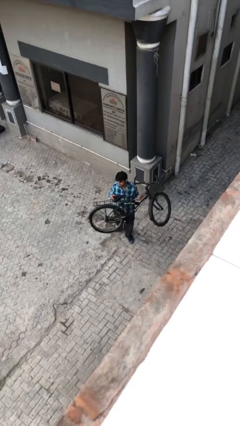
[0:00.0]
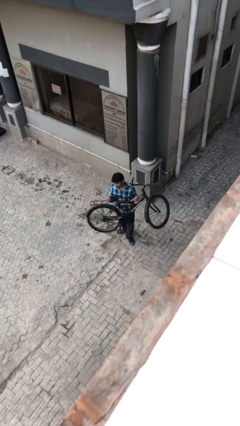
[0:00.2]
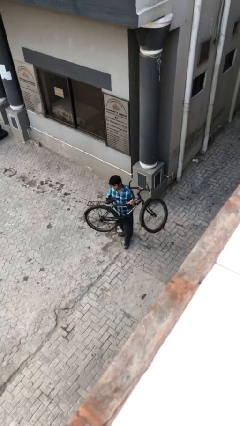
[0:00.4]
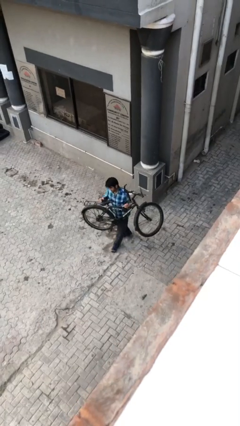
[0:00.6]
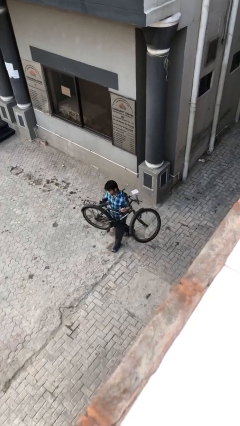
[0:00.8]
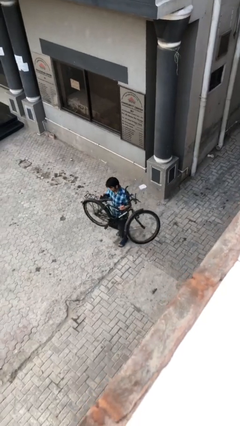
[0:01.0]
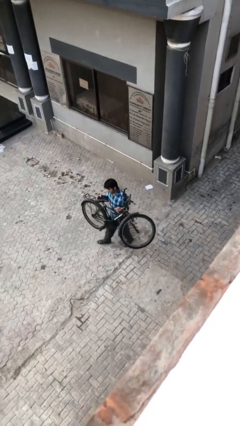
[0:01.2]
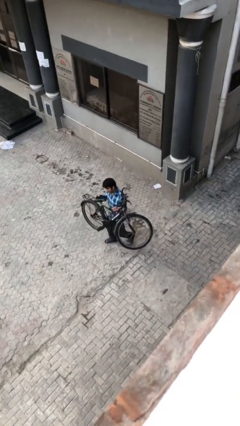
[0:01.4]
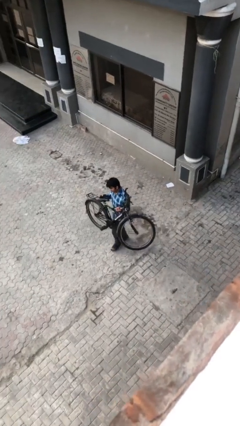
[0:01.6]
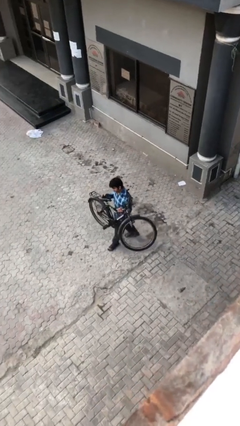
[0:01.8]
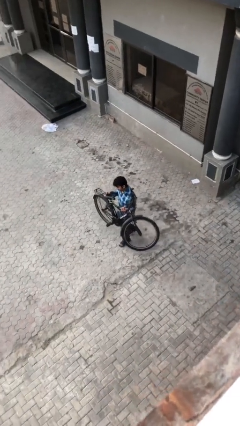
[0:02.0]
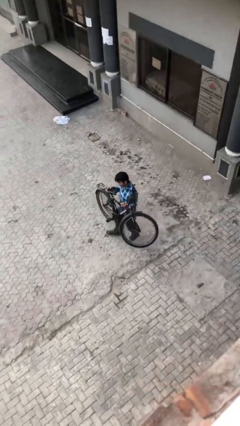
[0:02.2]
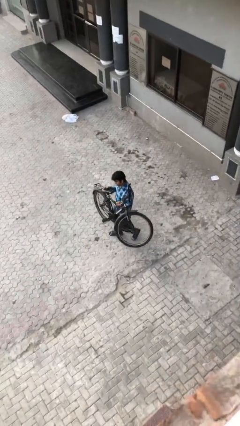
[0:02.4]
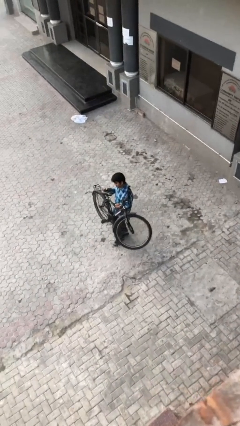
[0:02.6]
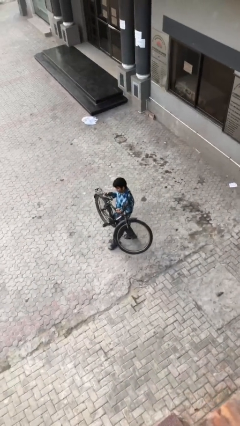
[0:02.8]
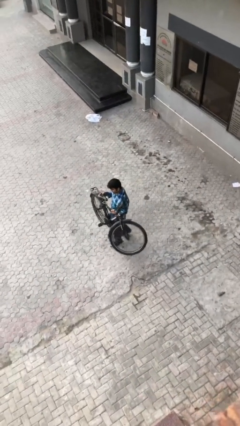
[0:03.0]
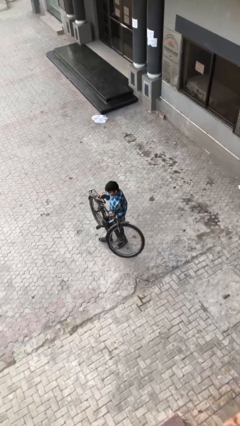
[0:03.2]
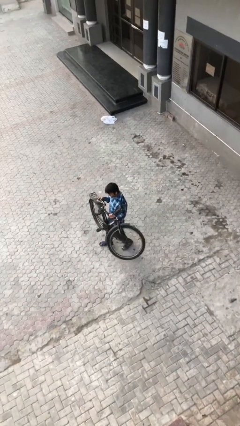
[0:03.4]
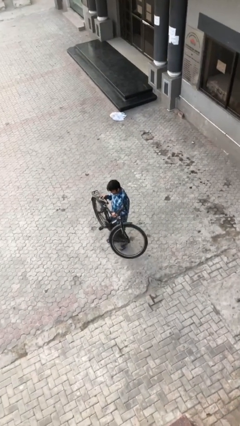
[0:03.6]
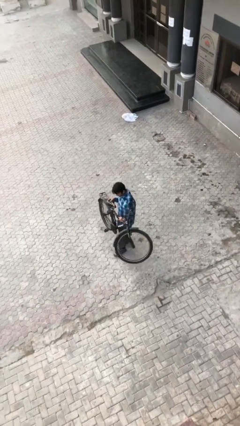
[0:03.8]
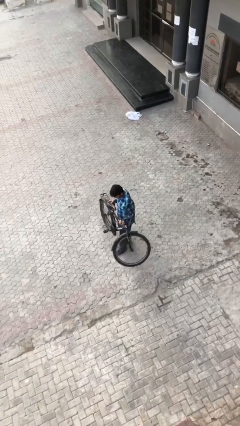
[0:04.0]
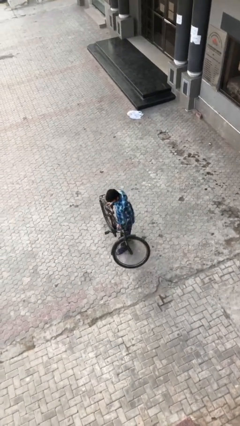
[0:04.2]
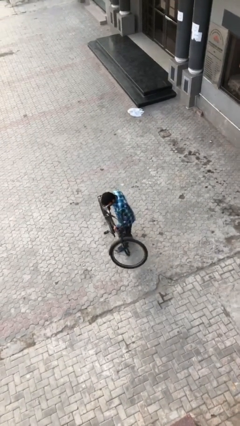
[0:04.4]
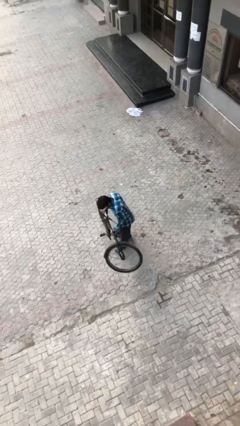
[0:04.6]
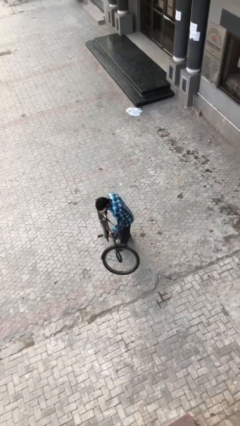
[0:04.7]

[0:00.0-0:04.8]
person carries heavy object

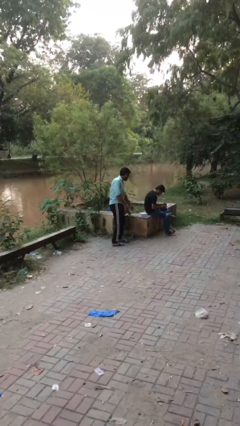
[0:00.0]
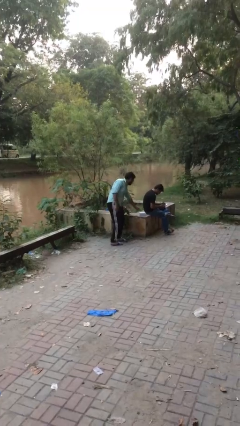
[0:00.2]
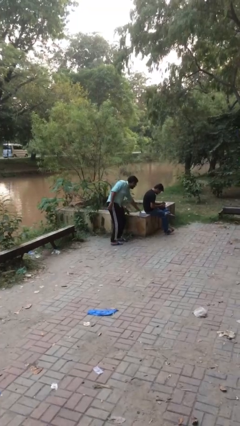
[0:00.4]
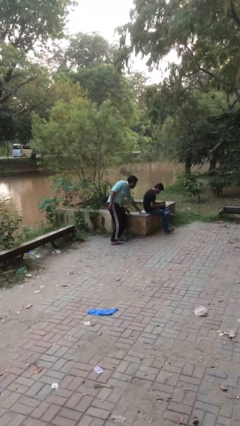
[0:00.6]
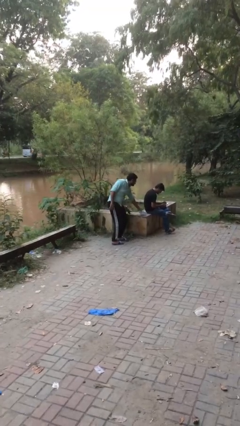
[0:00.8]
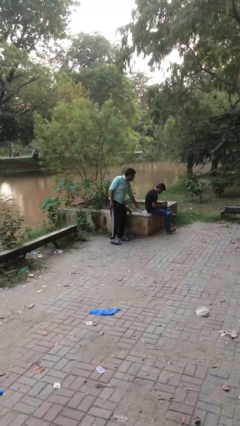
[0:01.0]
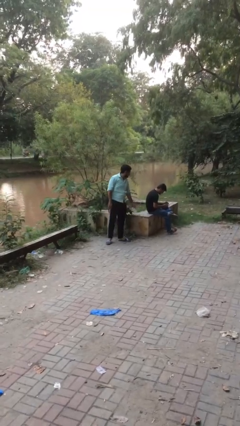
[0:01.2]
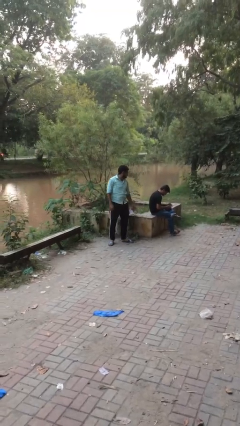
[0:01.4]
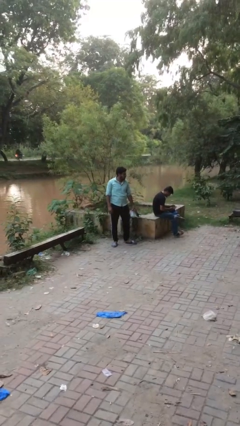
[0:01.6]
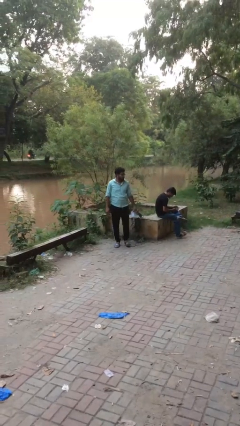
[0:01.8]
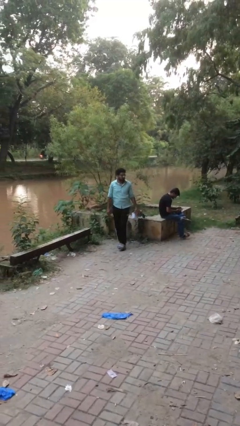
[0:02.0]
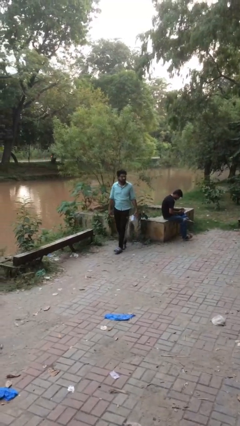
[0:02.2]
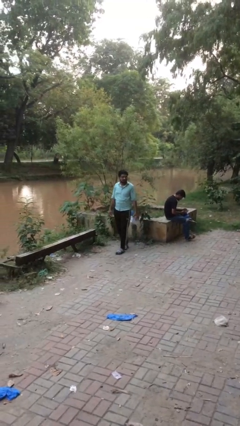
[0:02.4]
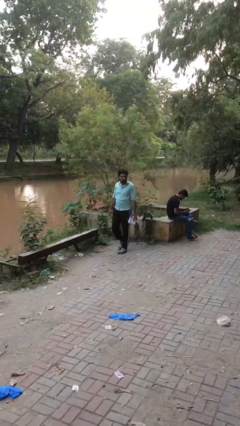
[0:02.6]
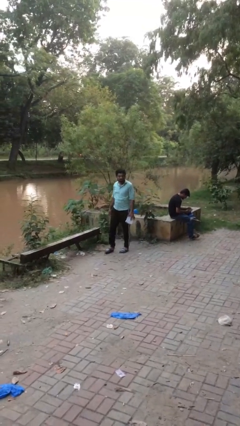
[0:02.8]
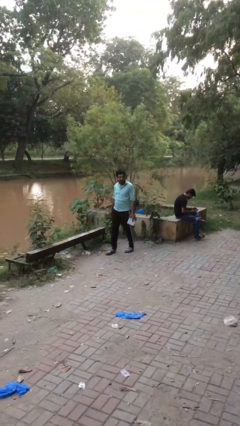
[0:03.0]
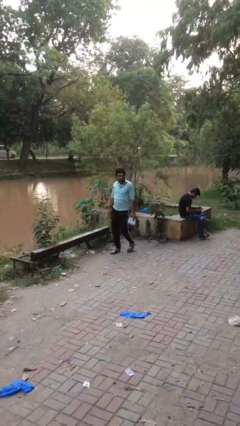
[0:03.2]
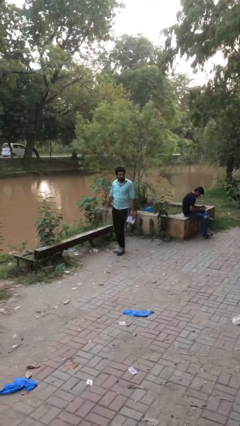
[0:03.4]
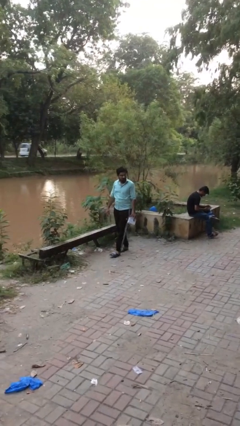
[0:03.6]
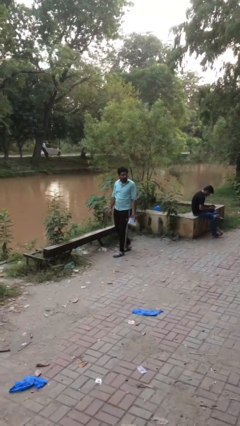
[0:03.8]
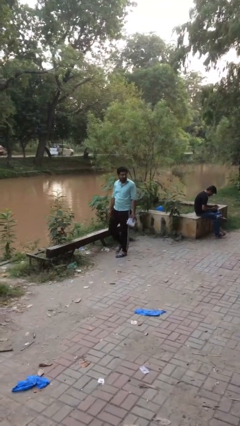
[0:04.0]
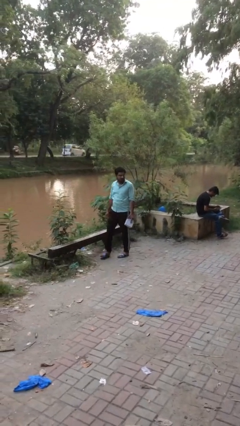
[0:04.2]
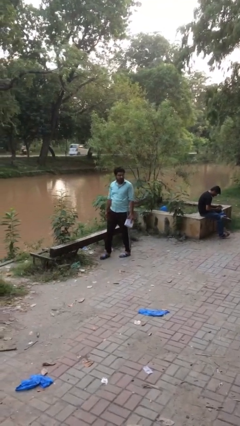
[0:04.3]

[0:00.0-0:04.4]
person steals object from person

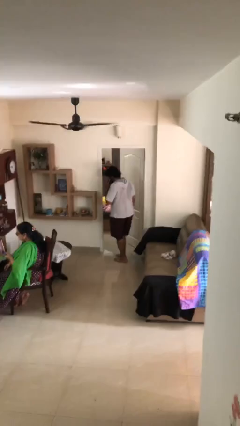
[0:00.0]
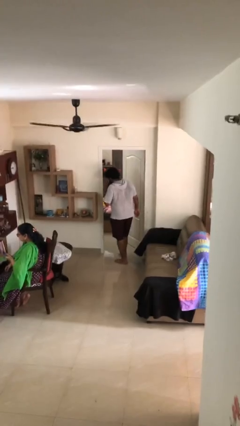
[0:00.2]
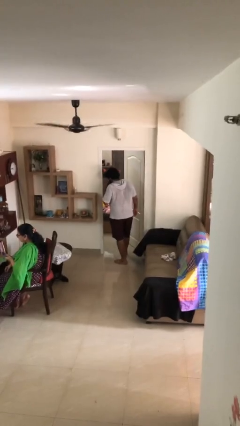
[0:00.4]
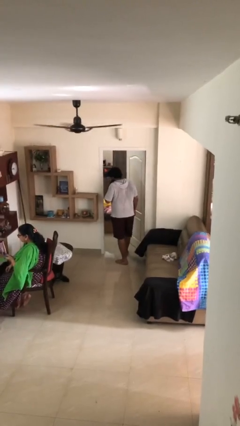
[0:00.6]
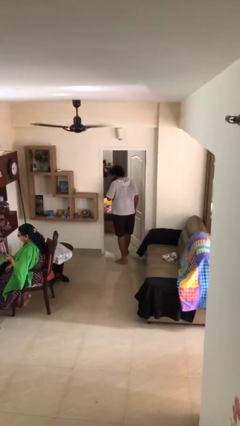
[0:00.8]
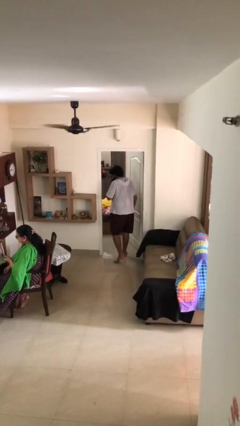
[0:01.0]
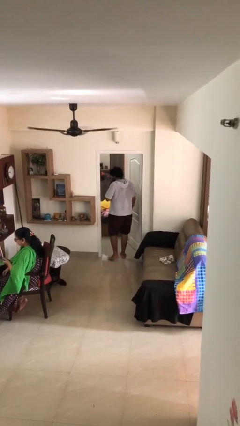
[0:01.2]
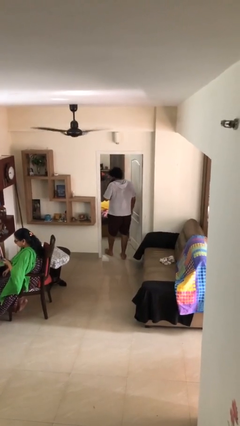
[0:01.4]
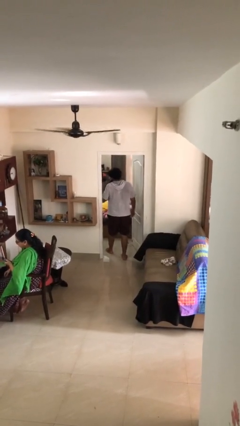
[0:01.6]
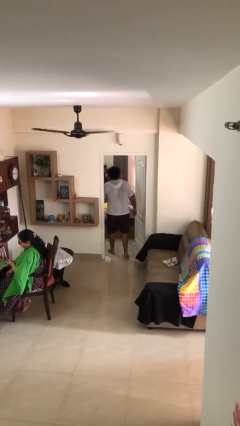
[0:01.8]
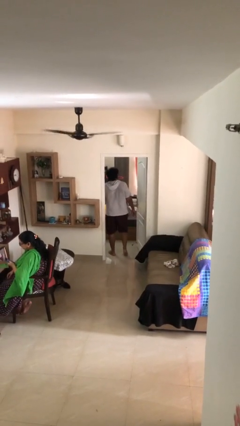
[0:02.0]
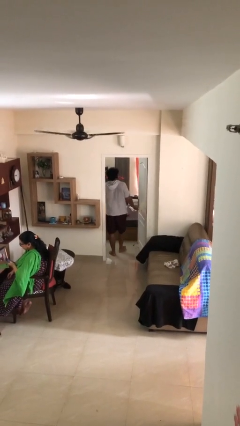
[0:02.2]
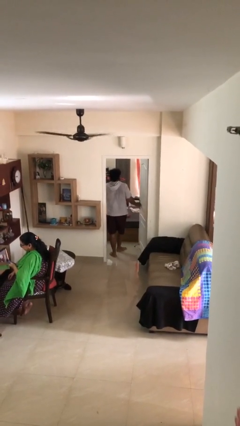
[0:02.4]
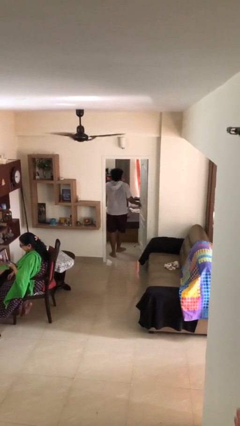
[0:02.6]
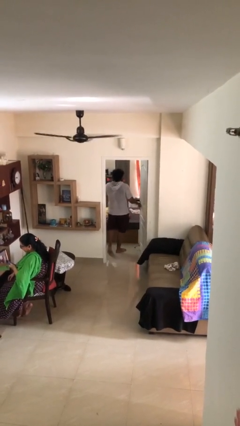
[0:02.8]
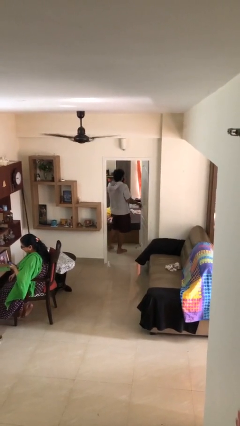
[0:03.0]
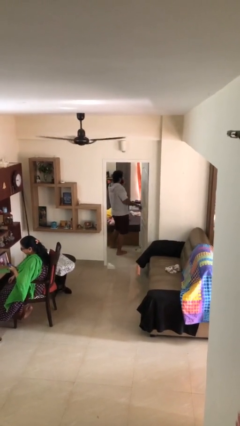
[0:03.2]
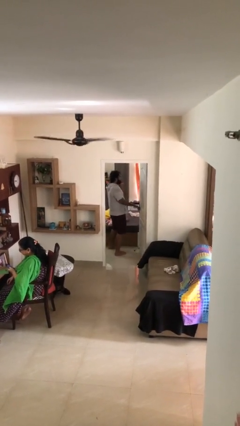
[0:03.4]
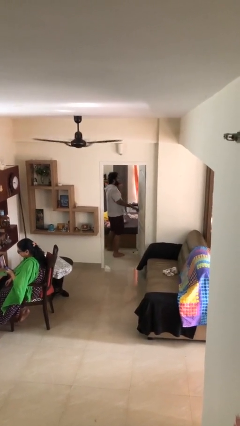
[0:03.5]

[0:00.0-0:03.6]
person exits scene through structure

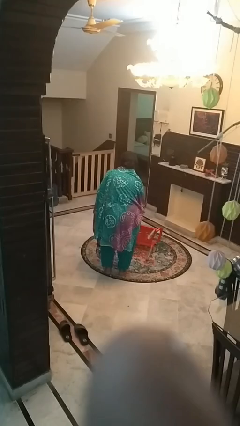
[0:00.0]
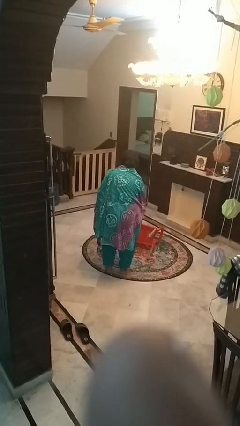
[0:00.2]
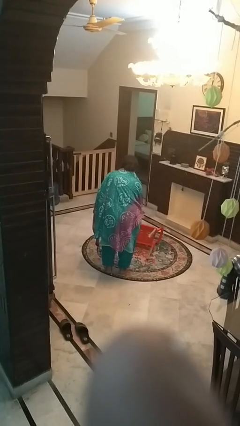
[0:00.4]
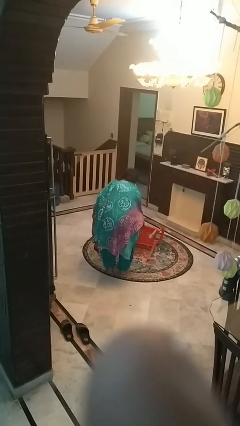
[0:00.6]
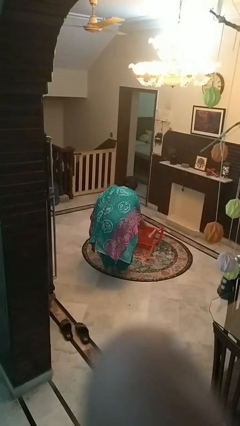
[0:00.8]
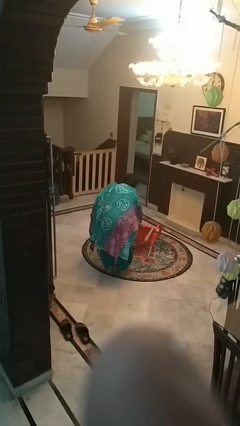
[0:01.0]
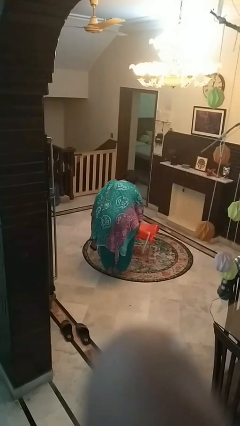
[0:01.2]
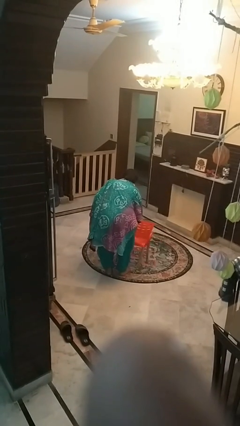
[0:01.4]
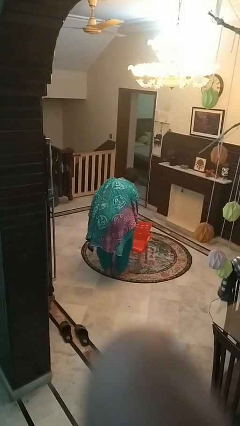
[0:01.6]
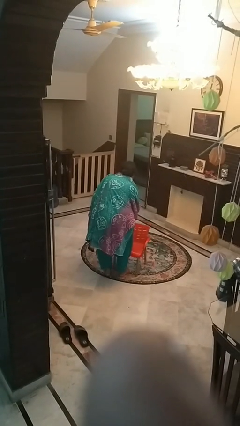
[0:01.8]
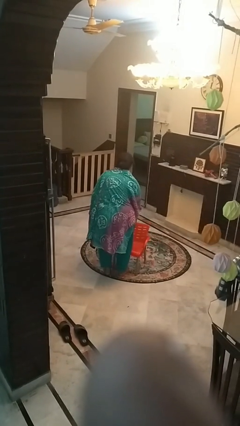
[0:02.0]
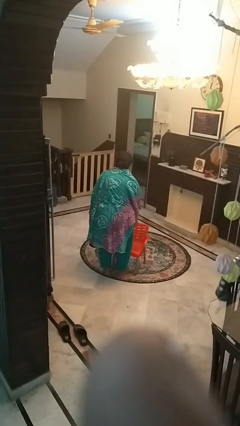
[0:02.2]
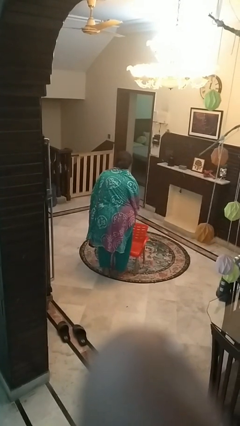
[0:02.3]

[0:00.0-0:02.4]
person sets upright furniture

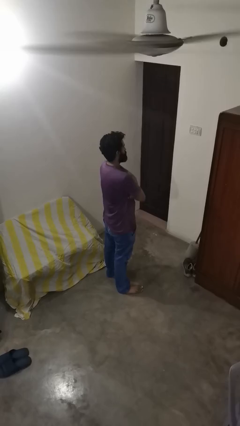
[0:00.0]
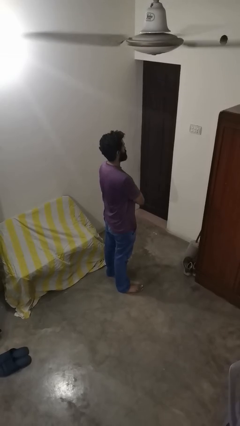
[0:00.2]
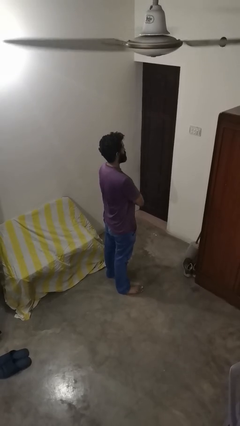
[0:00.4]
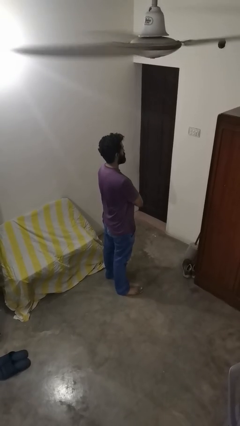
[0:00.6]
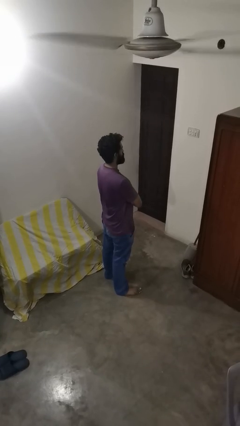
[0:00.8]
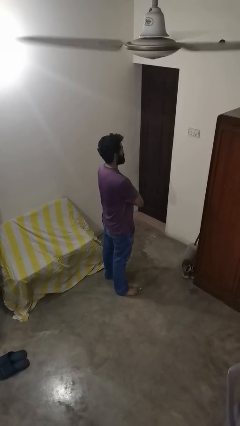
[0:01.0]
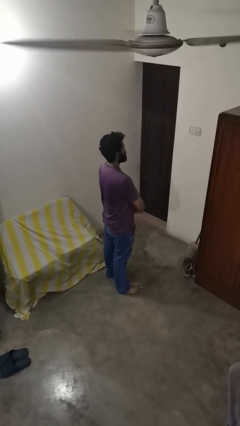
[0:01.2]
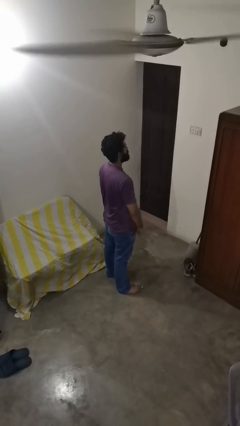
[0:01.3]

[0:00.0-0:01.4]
person crosses arms

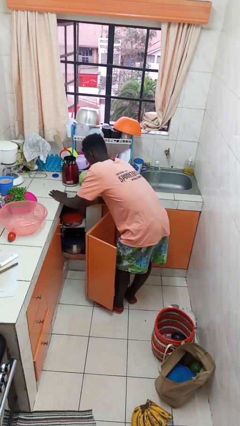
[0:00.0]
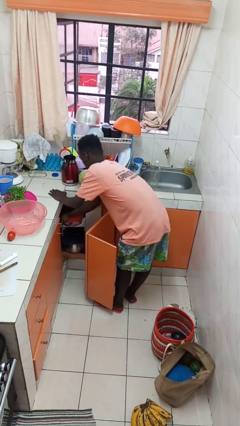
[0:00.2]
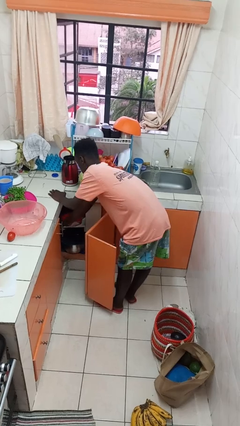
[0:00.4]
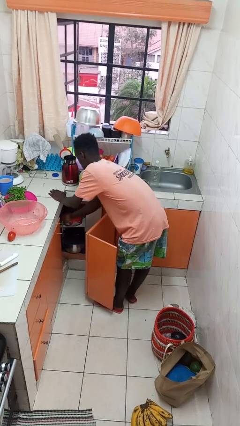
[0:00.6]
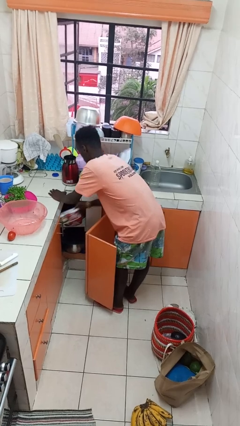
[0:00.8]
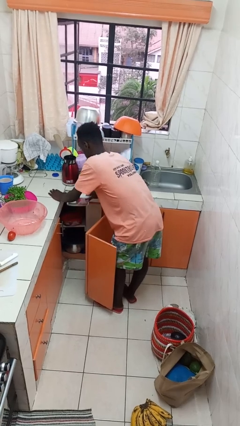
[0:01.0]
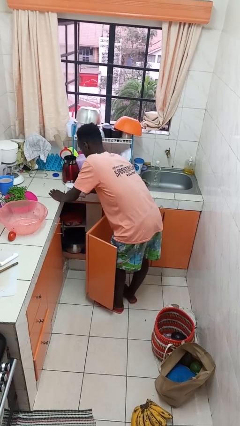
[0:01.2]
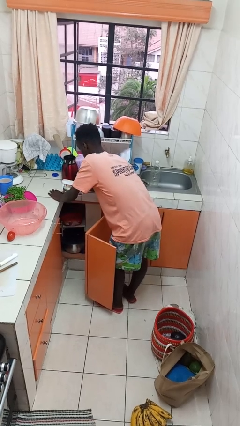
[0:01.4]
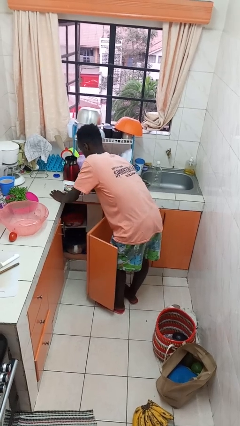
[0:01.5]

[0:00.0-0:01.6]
person takes object from cabinet
